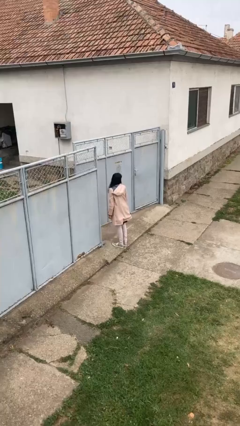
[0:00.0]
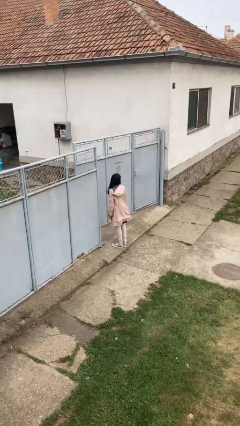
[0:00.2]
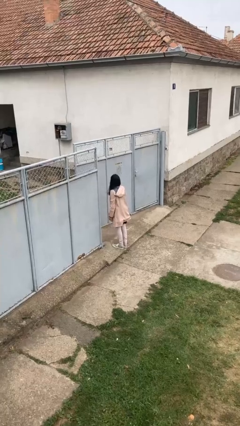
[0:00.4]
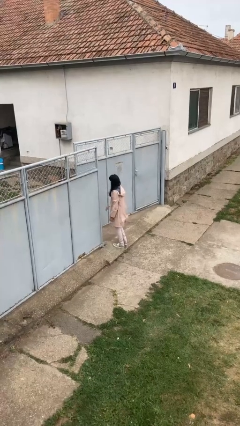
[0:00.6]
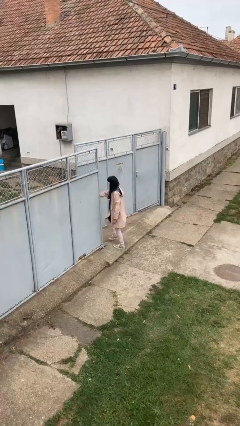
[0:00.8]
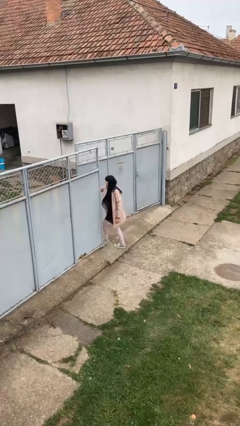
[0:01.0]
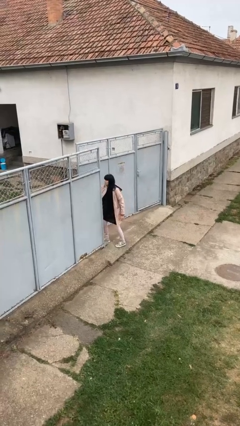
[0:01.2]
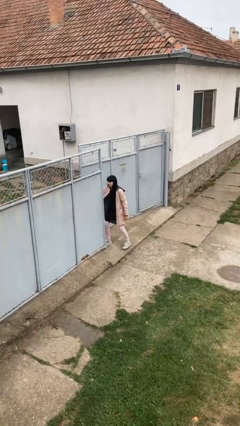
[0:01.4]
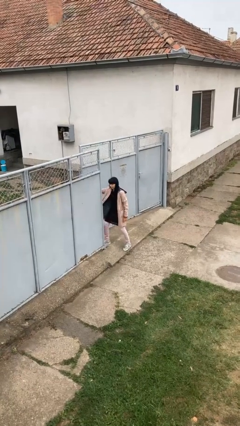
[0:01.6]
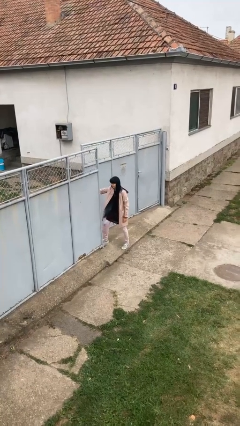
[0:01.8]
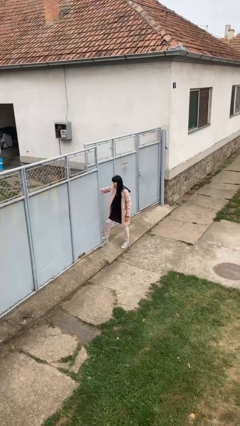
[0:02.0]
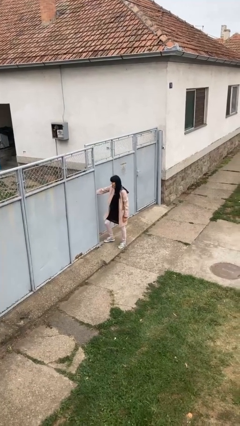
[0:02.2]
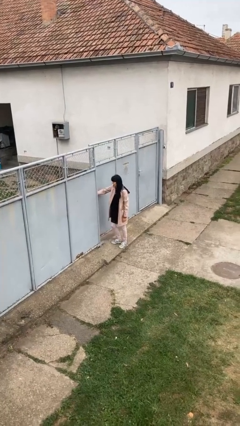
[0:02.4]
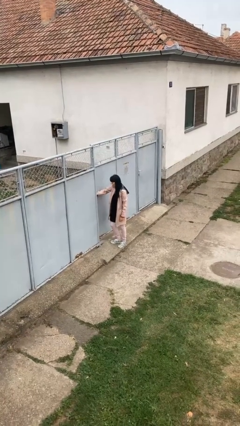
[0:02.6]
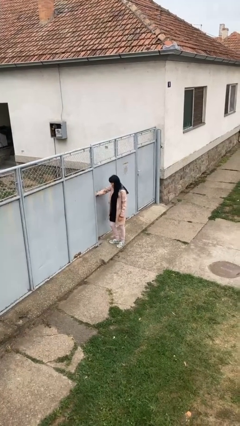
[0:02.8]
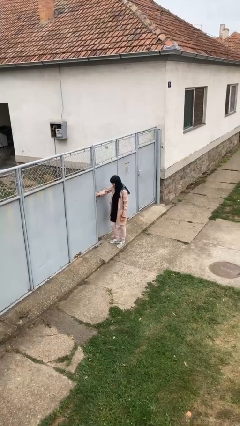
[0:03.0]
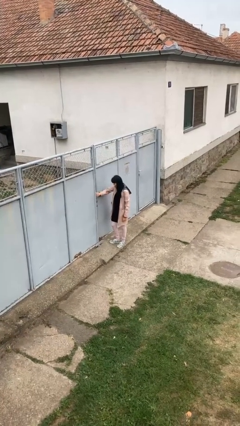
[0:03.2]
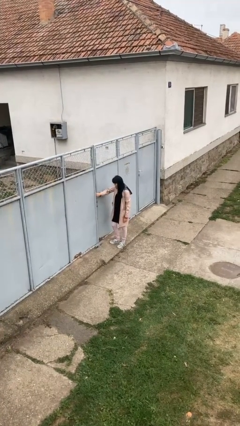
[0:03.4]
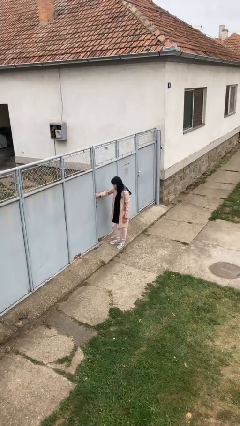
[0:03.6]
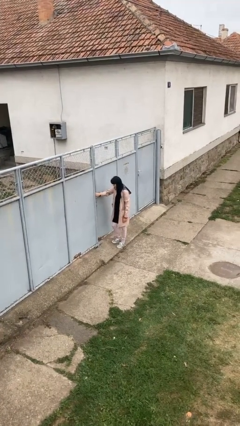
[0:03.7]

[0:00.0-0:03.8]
person closes gate

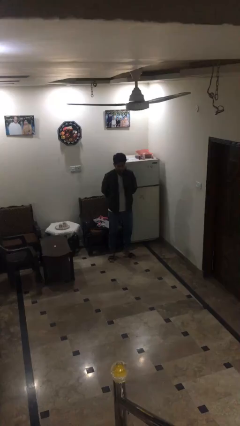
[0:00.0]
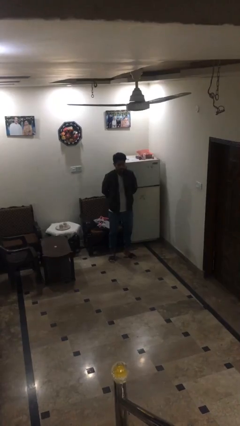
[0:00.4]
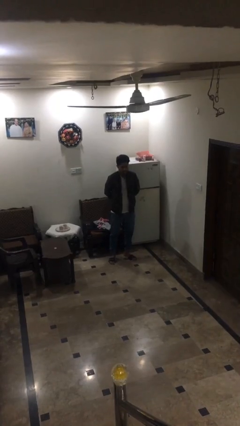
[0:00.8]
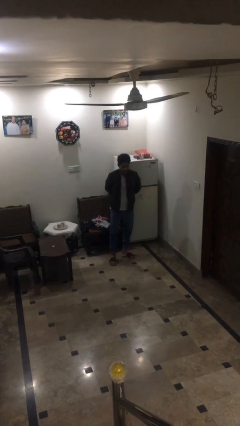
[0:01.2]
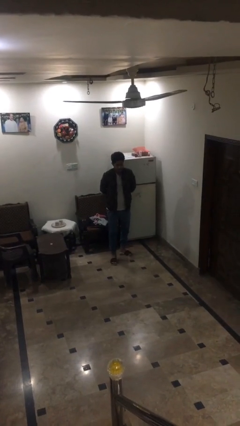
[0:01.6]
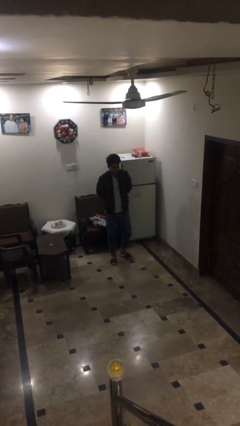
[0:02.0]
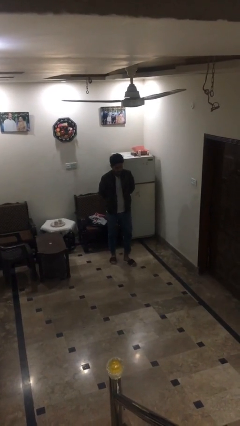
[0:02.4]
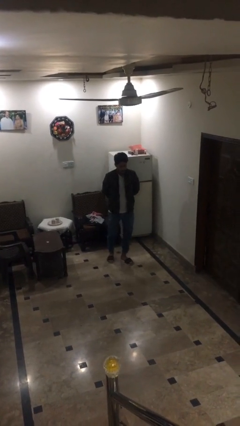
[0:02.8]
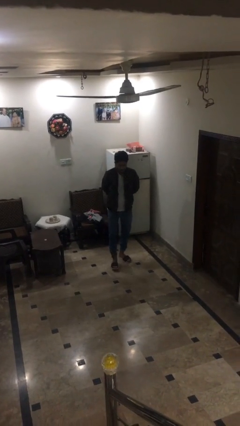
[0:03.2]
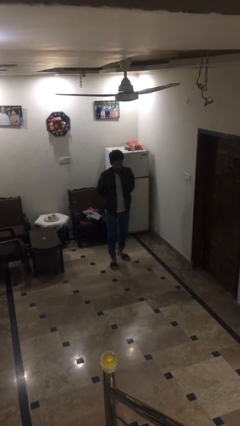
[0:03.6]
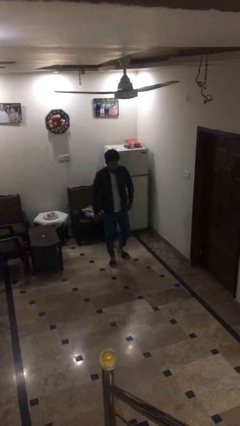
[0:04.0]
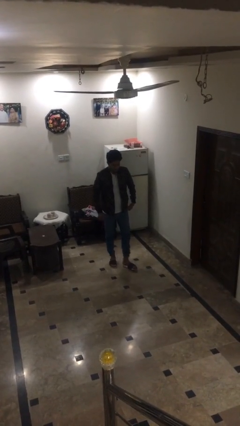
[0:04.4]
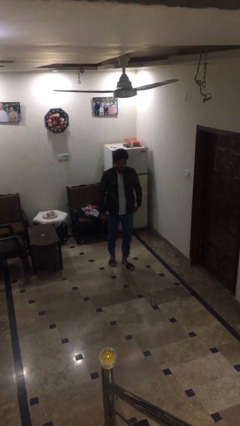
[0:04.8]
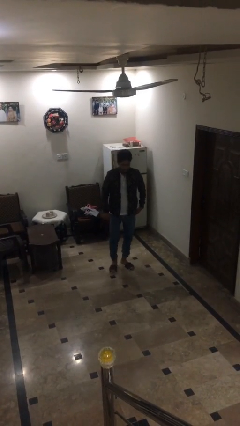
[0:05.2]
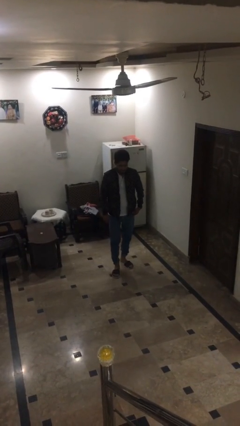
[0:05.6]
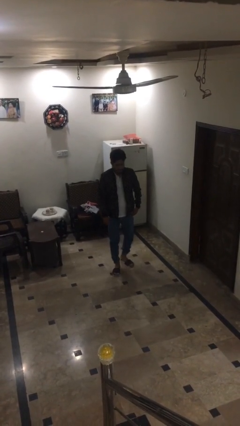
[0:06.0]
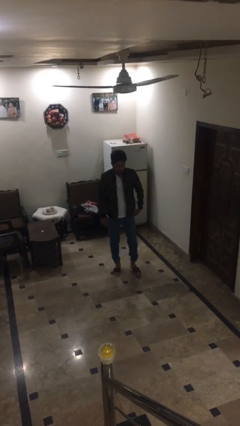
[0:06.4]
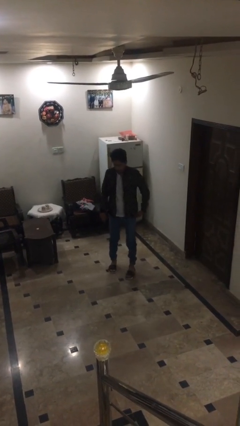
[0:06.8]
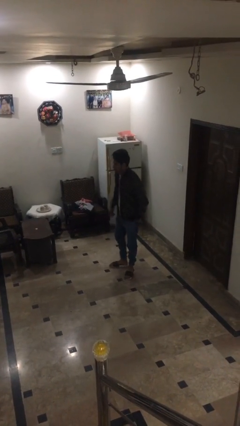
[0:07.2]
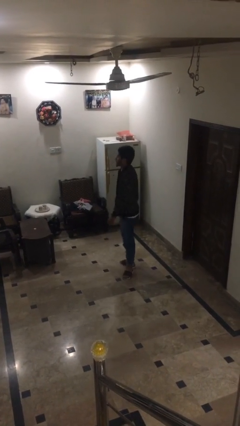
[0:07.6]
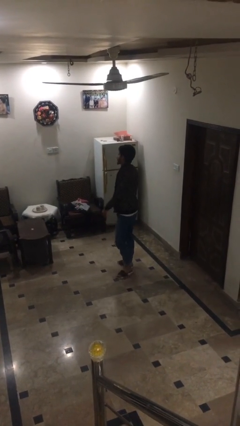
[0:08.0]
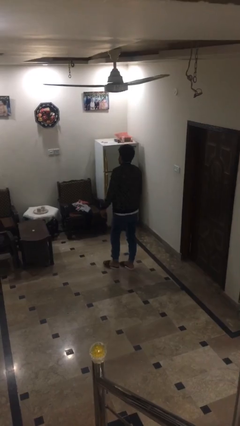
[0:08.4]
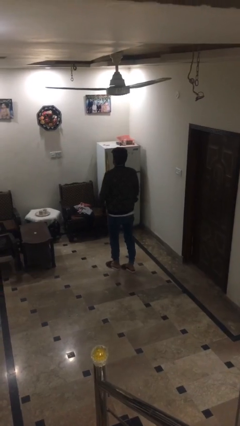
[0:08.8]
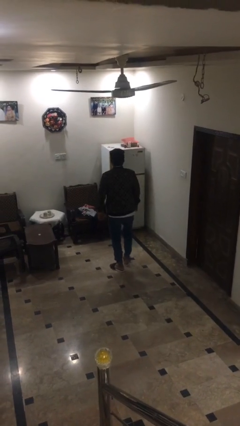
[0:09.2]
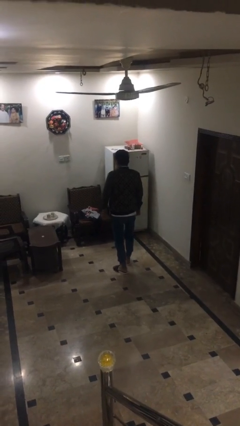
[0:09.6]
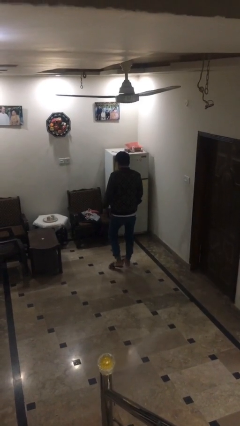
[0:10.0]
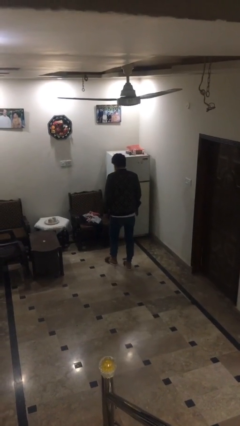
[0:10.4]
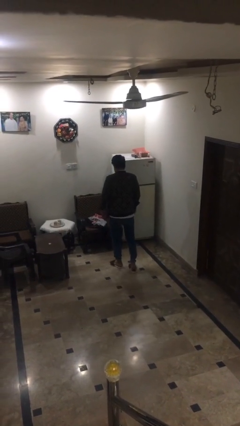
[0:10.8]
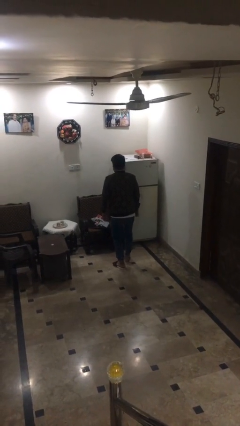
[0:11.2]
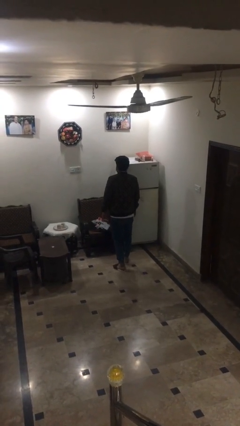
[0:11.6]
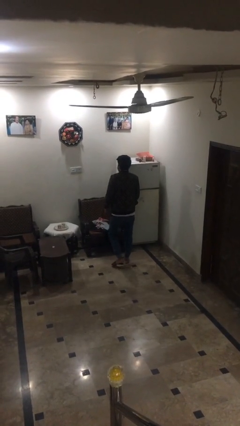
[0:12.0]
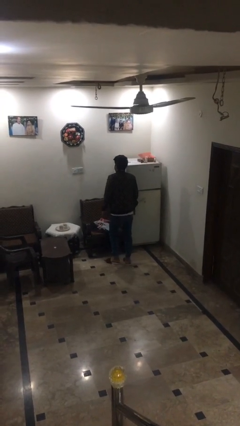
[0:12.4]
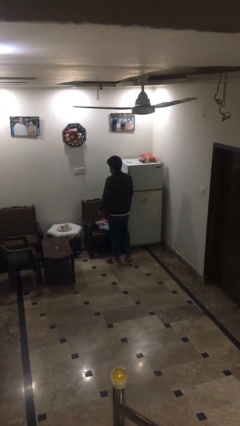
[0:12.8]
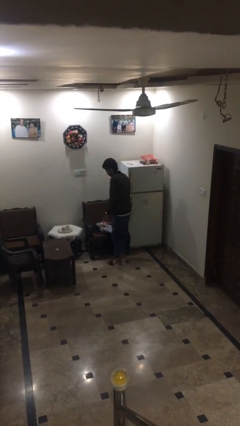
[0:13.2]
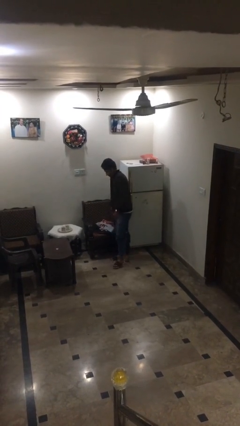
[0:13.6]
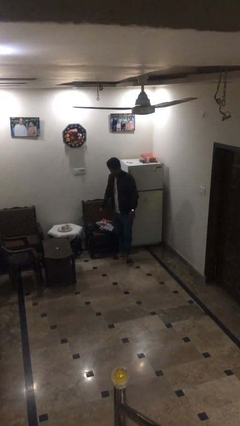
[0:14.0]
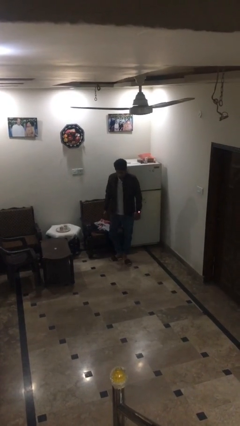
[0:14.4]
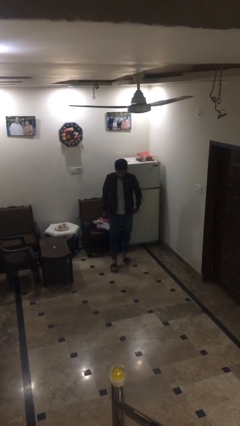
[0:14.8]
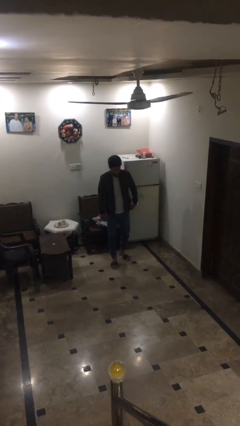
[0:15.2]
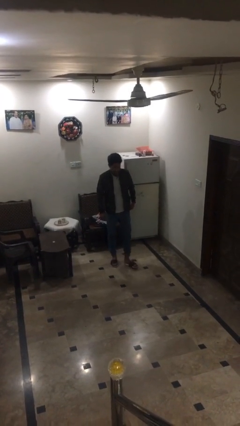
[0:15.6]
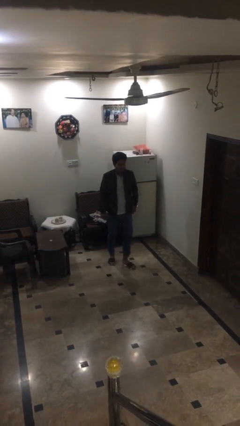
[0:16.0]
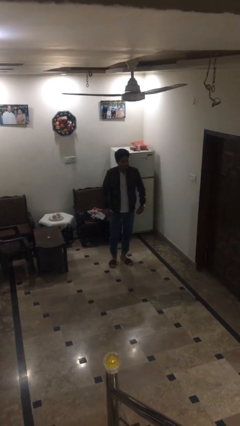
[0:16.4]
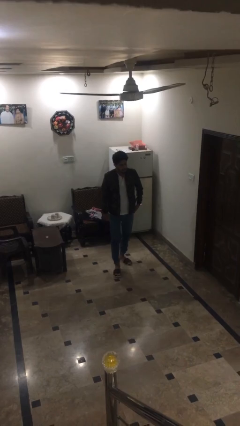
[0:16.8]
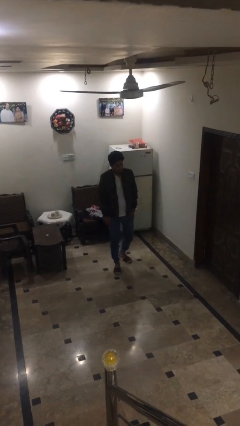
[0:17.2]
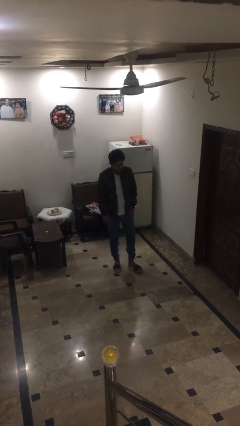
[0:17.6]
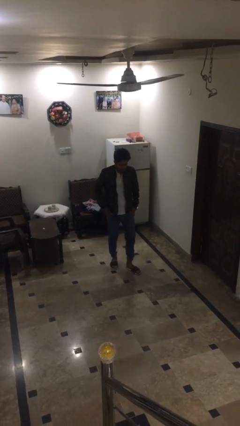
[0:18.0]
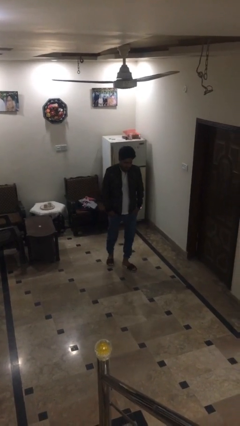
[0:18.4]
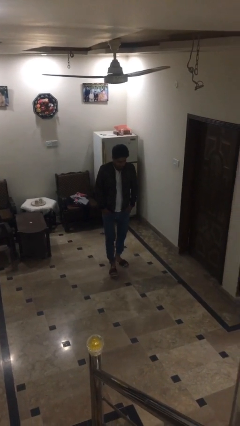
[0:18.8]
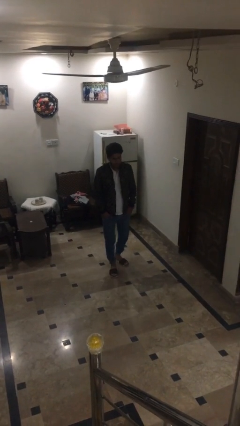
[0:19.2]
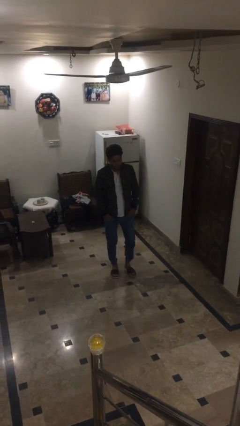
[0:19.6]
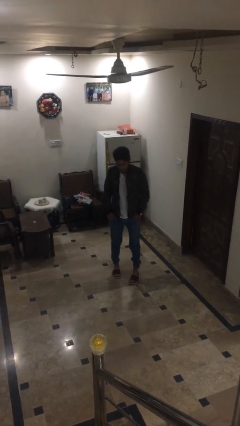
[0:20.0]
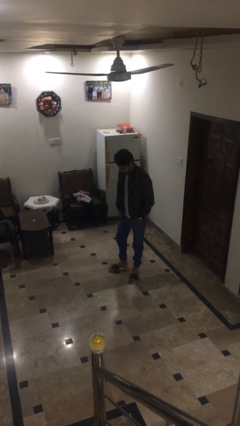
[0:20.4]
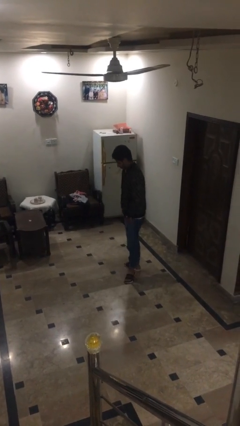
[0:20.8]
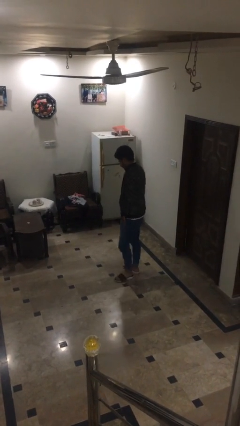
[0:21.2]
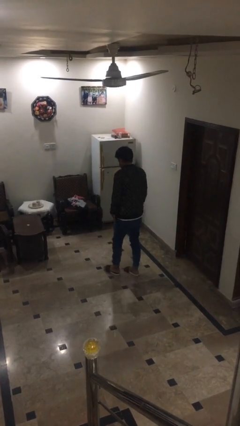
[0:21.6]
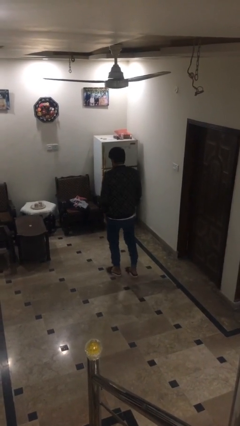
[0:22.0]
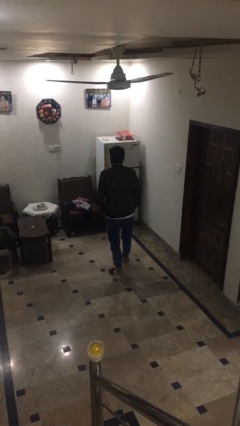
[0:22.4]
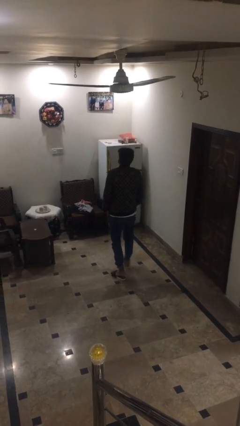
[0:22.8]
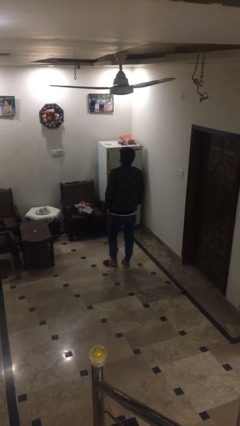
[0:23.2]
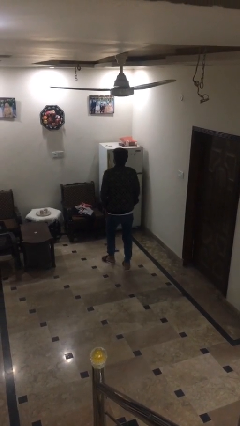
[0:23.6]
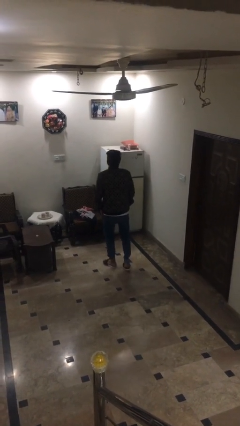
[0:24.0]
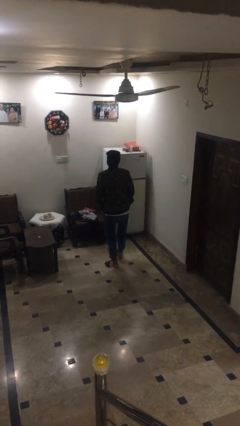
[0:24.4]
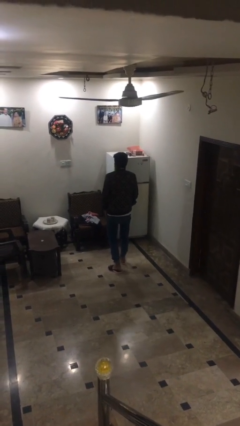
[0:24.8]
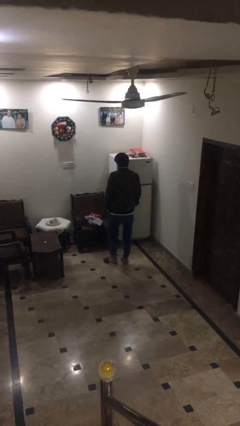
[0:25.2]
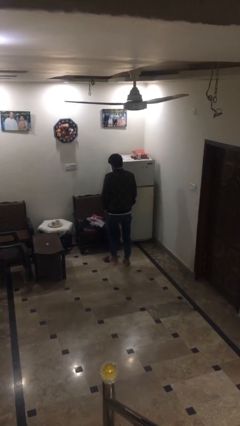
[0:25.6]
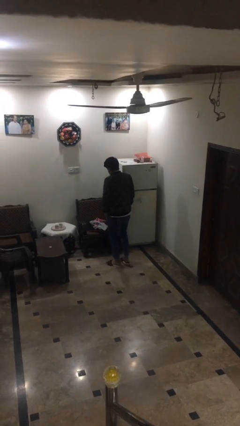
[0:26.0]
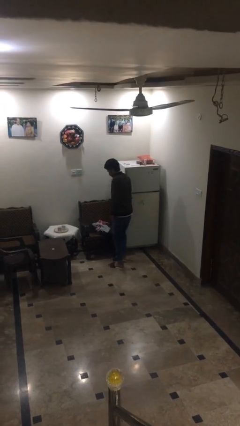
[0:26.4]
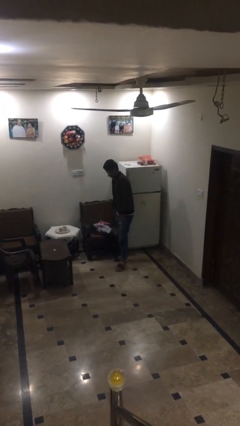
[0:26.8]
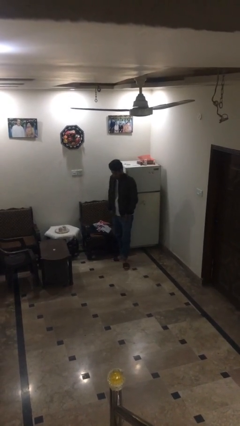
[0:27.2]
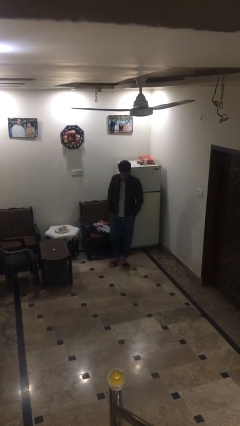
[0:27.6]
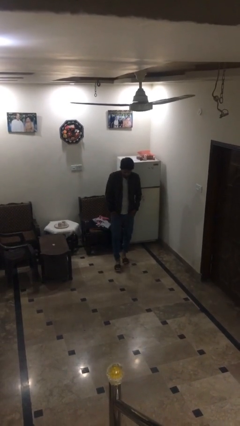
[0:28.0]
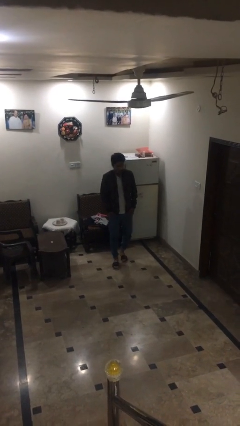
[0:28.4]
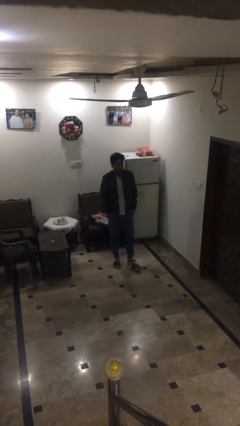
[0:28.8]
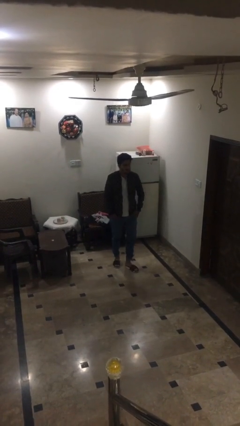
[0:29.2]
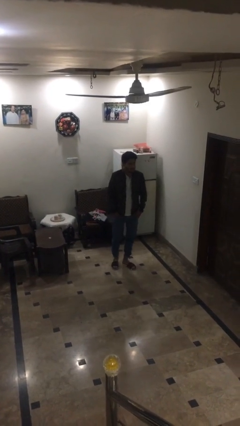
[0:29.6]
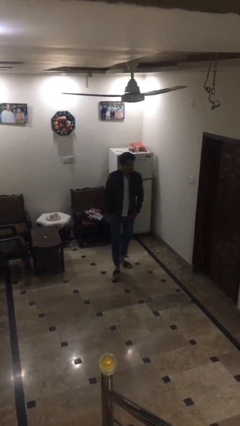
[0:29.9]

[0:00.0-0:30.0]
person walks
